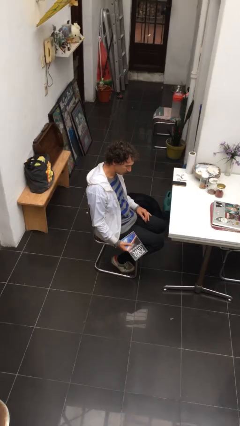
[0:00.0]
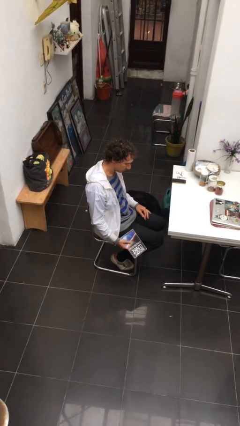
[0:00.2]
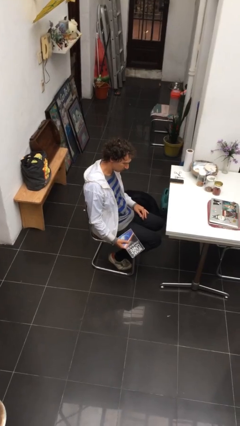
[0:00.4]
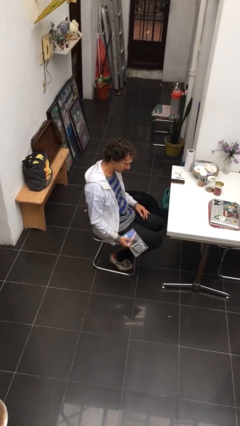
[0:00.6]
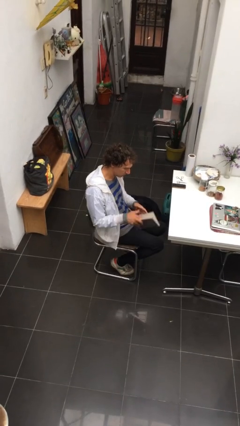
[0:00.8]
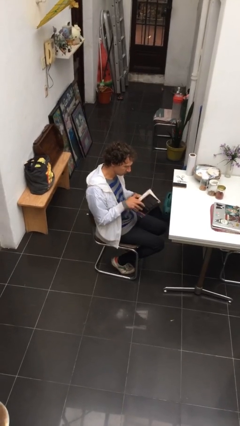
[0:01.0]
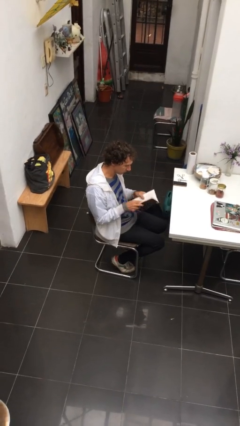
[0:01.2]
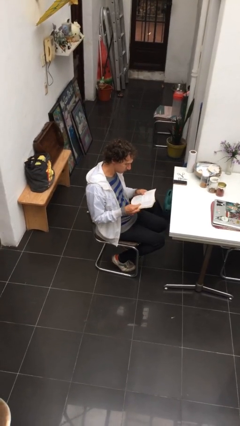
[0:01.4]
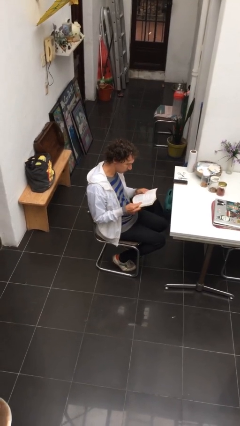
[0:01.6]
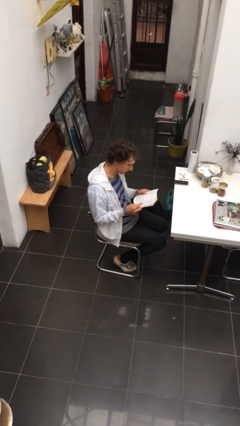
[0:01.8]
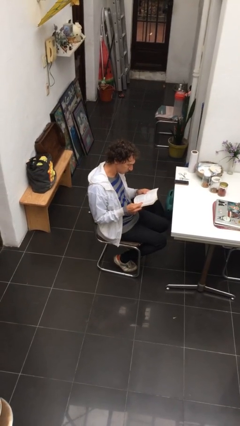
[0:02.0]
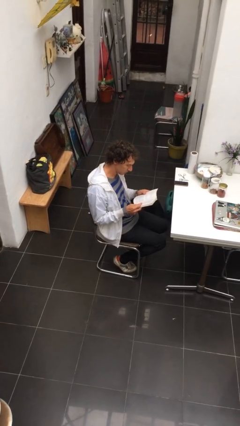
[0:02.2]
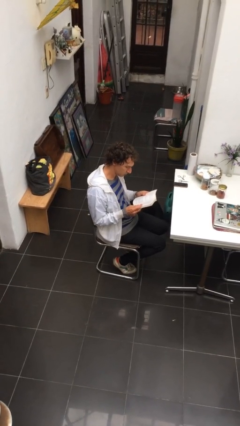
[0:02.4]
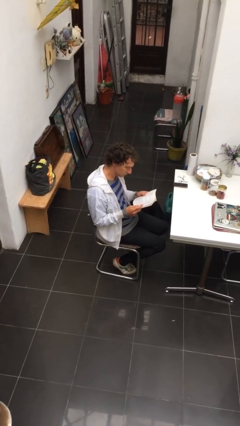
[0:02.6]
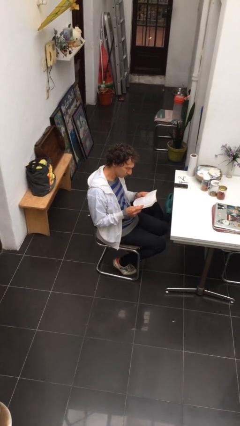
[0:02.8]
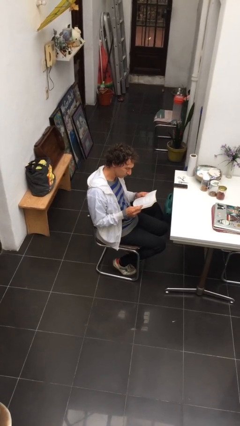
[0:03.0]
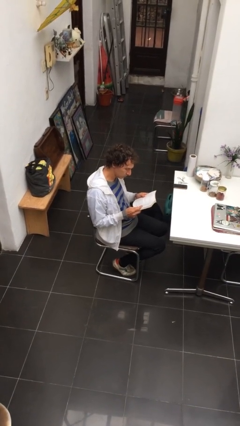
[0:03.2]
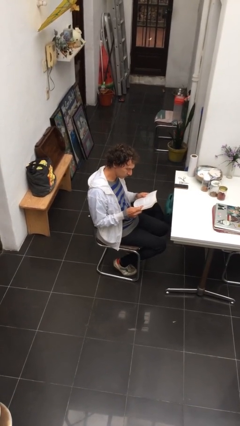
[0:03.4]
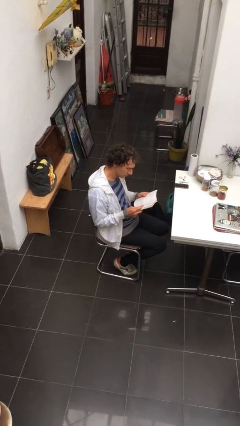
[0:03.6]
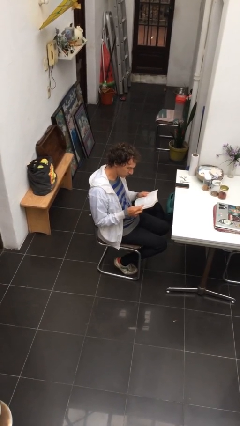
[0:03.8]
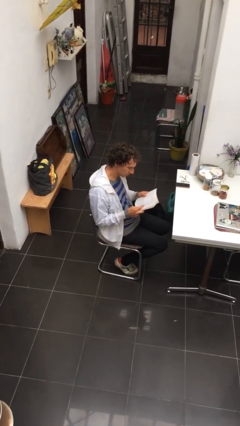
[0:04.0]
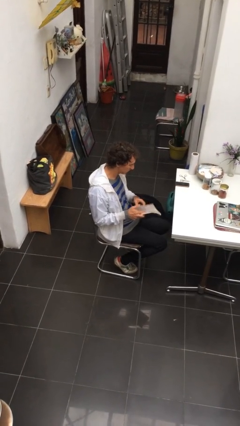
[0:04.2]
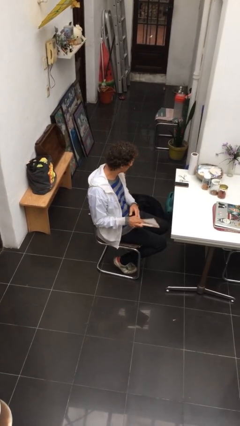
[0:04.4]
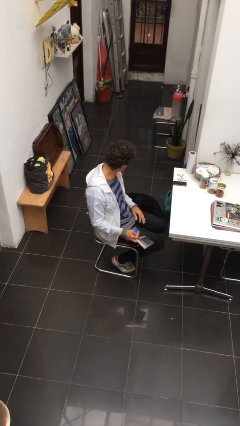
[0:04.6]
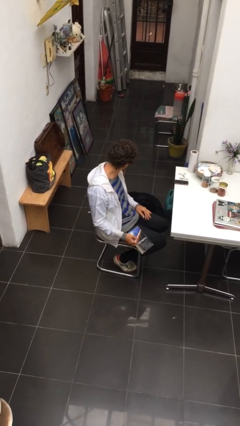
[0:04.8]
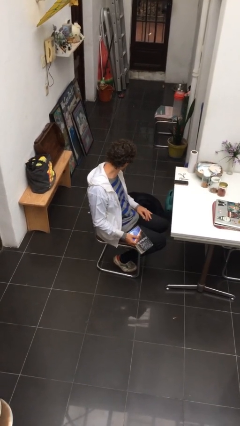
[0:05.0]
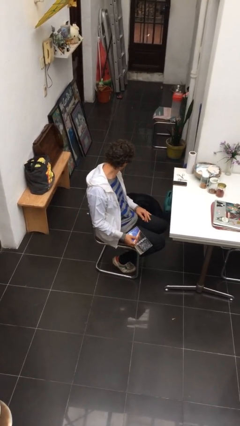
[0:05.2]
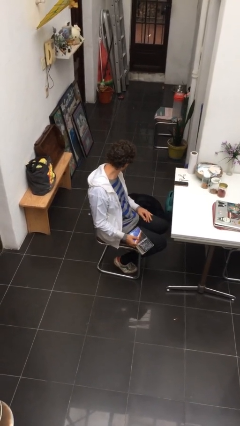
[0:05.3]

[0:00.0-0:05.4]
person reads document

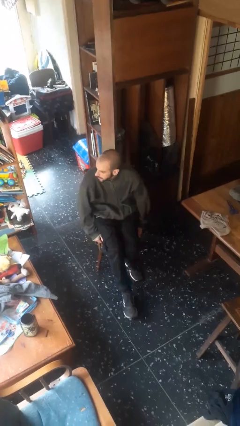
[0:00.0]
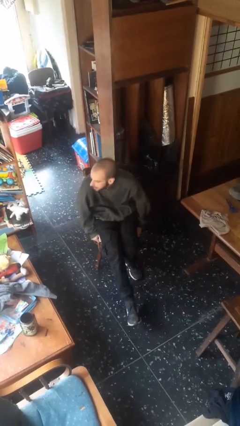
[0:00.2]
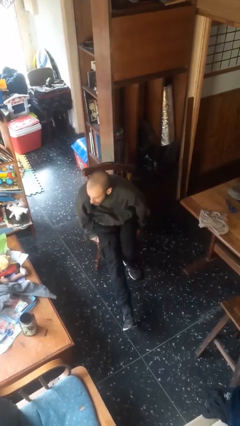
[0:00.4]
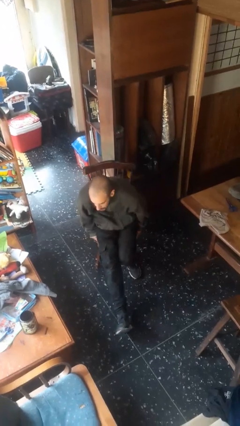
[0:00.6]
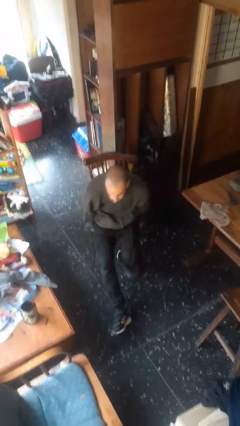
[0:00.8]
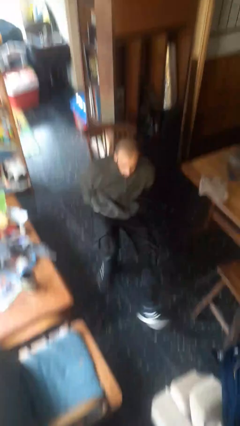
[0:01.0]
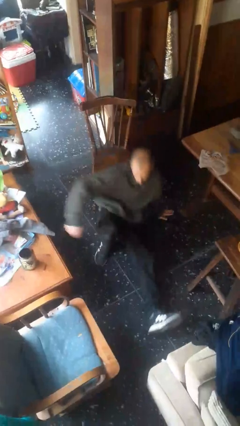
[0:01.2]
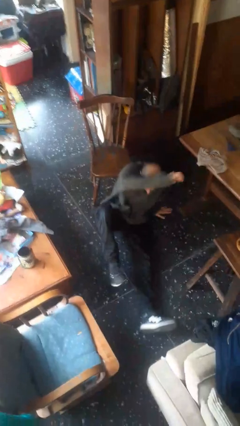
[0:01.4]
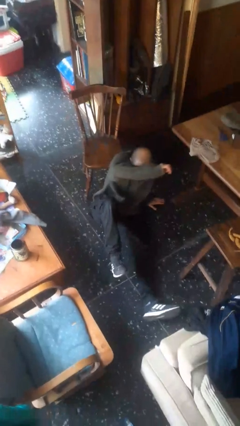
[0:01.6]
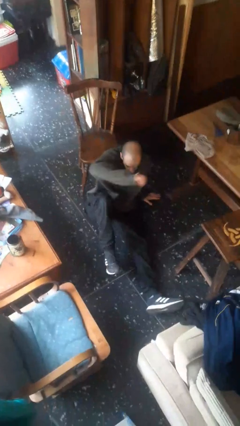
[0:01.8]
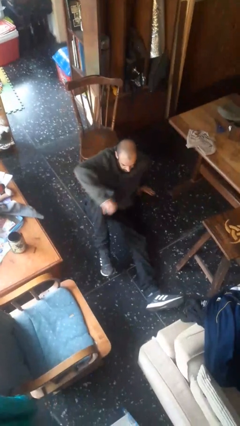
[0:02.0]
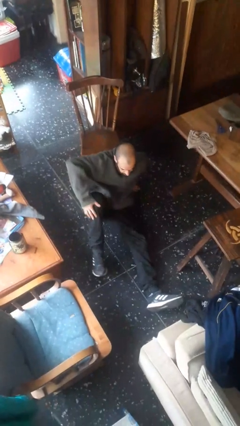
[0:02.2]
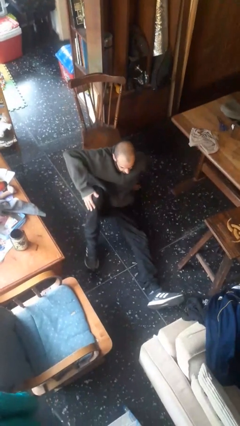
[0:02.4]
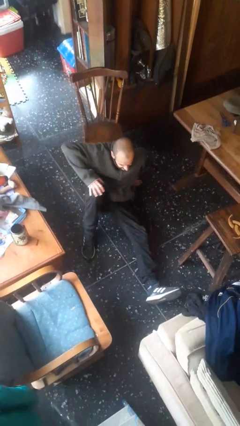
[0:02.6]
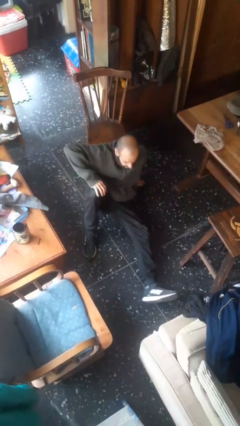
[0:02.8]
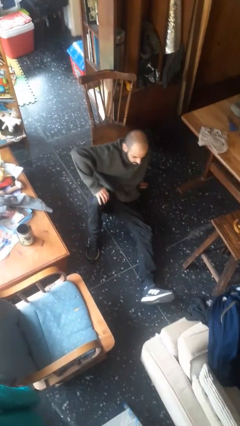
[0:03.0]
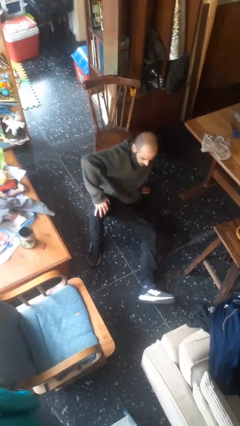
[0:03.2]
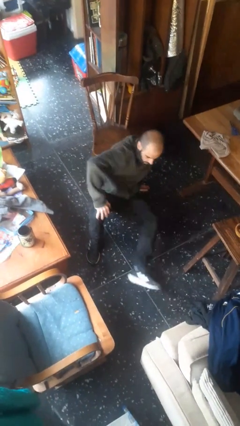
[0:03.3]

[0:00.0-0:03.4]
person falls from chair

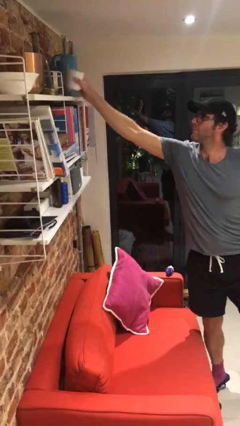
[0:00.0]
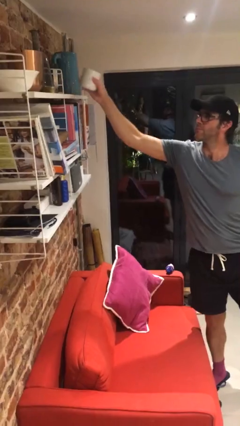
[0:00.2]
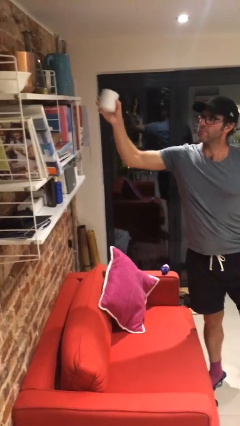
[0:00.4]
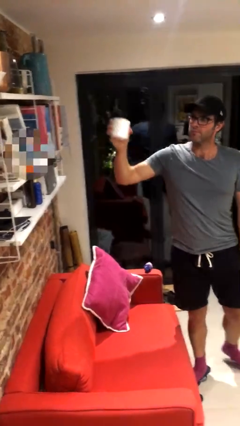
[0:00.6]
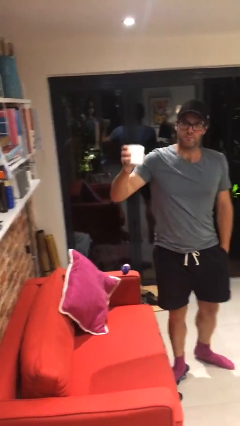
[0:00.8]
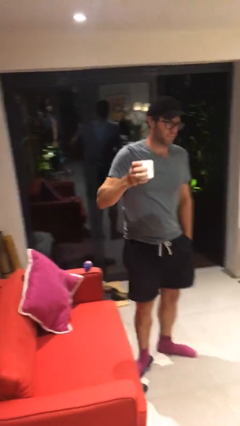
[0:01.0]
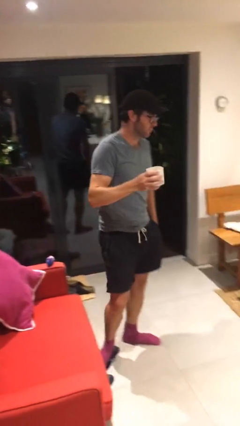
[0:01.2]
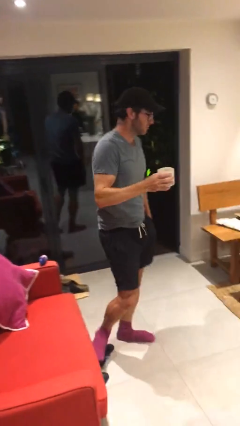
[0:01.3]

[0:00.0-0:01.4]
person picks up object from shelf

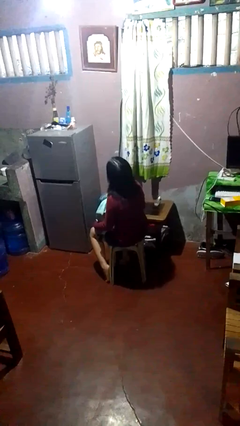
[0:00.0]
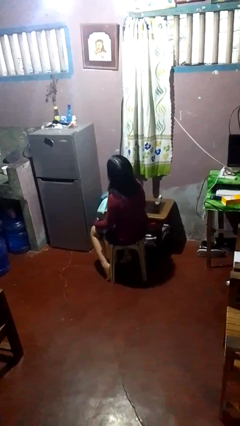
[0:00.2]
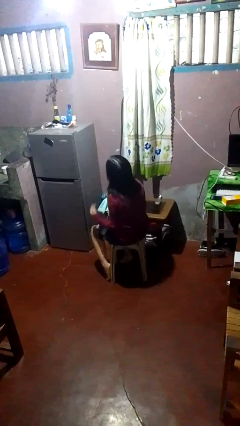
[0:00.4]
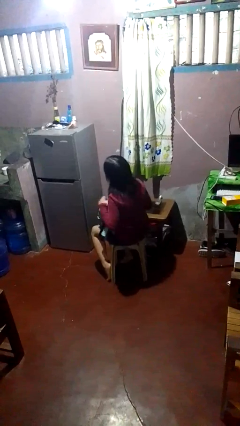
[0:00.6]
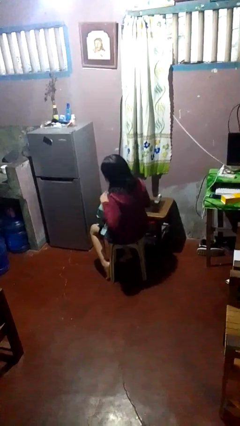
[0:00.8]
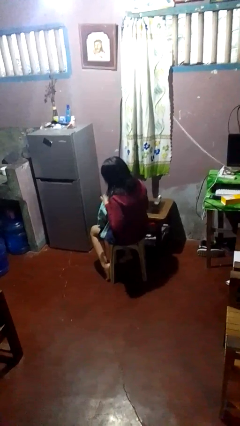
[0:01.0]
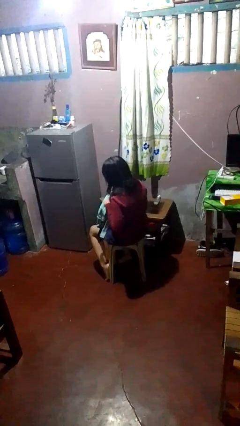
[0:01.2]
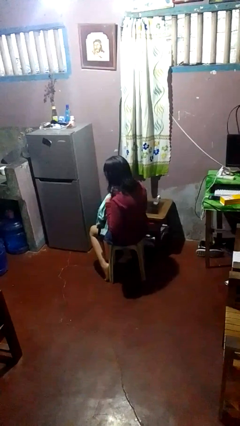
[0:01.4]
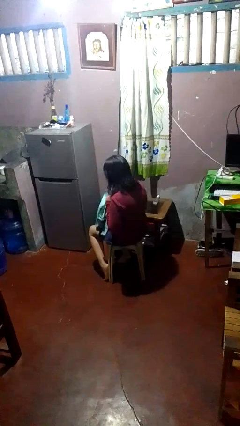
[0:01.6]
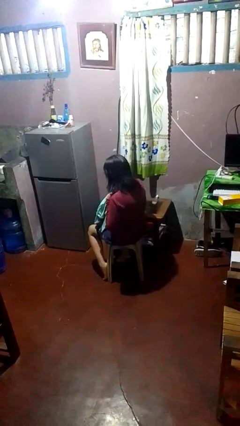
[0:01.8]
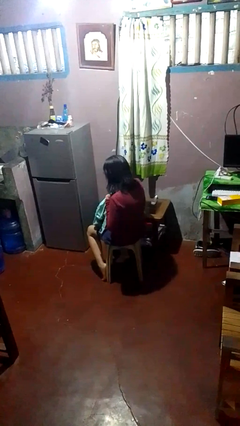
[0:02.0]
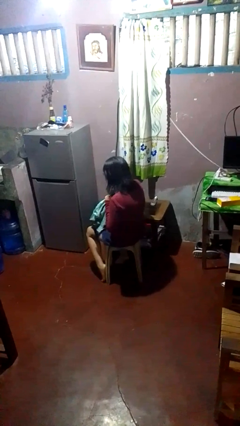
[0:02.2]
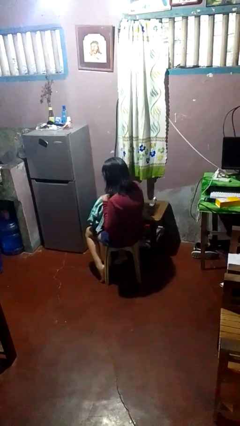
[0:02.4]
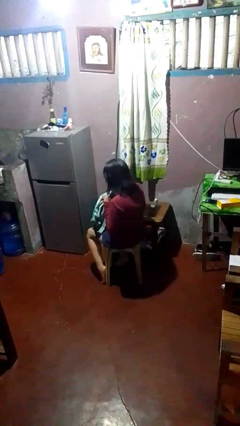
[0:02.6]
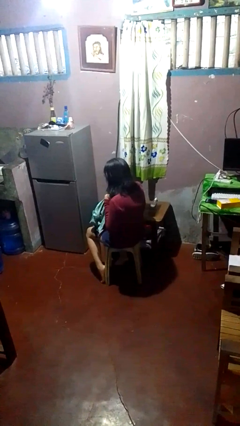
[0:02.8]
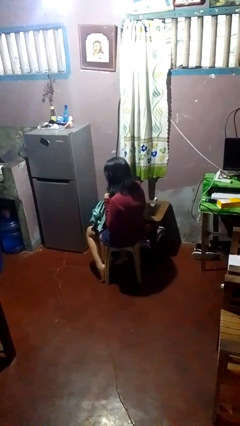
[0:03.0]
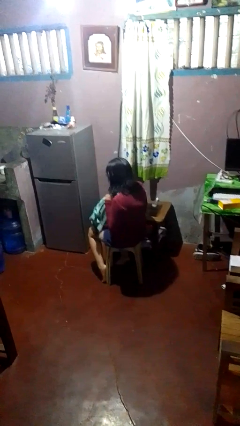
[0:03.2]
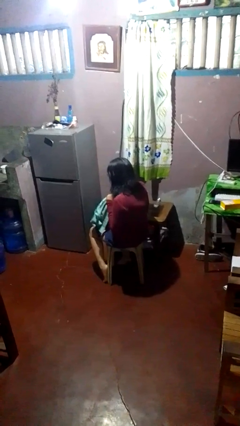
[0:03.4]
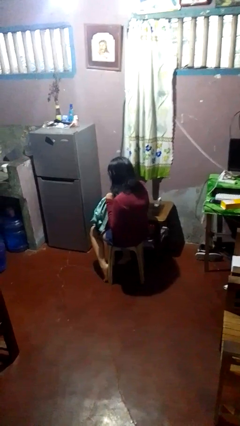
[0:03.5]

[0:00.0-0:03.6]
person searches in backpack

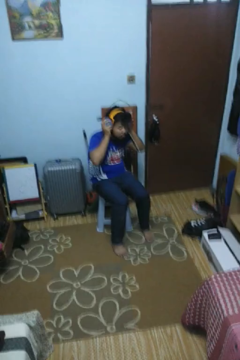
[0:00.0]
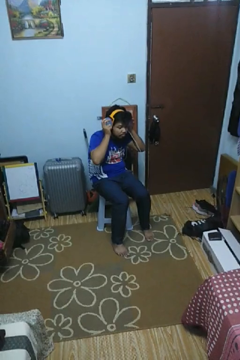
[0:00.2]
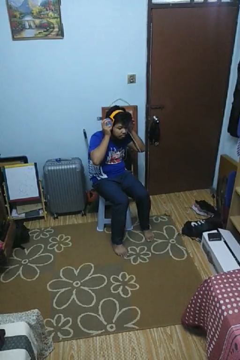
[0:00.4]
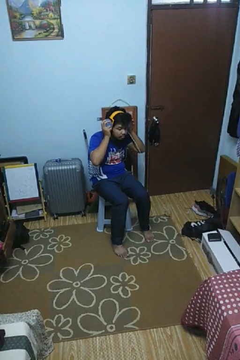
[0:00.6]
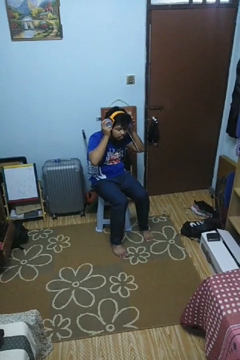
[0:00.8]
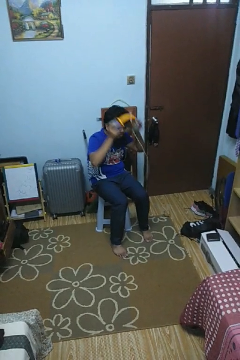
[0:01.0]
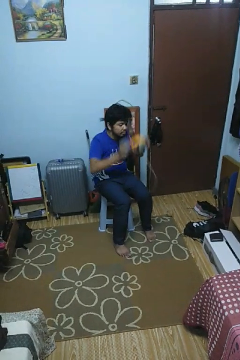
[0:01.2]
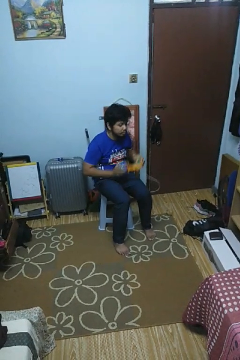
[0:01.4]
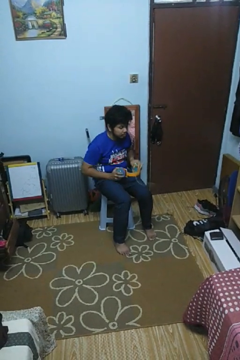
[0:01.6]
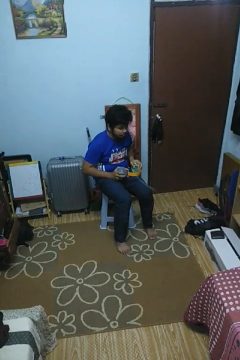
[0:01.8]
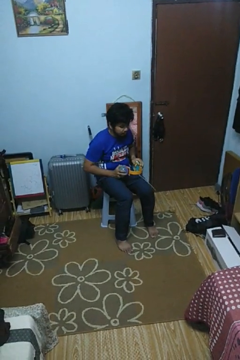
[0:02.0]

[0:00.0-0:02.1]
person takes off headphones

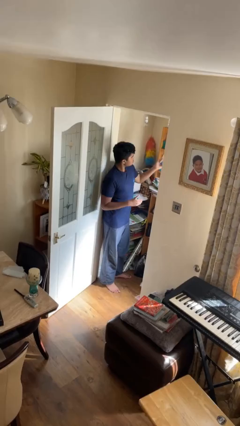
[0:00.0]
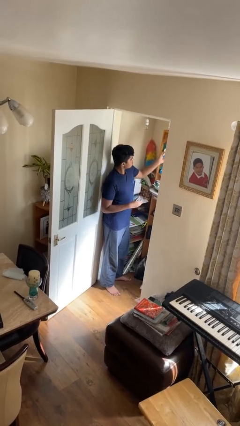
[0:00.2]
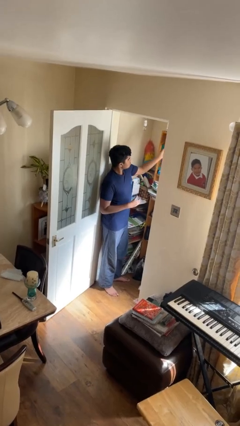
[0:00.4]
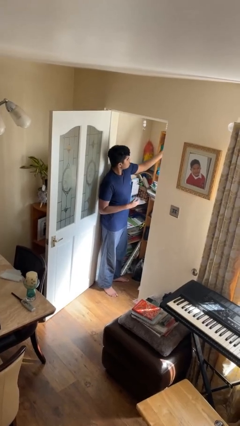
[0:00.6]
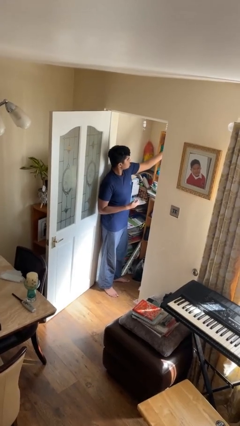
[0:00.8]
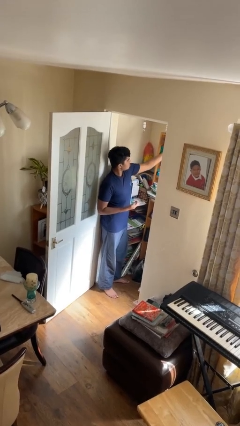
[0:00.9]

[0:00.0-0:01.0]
person puts down object on shelf

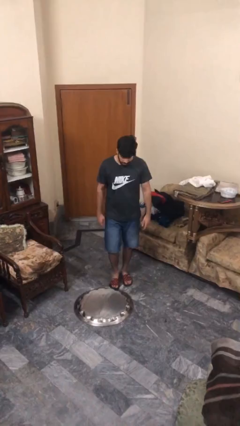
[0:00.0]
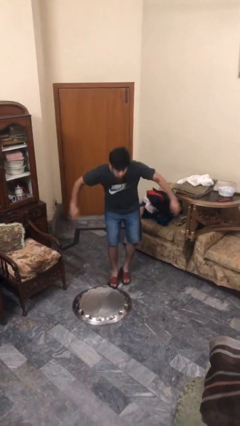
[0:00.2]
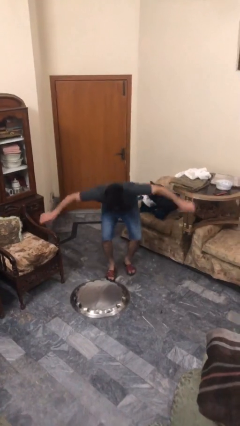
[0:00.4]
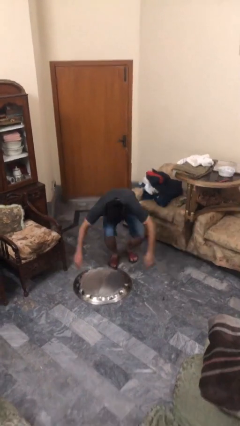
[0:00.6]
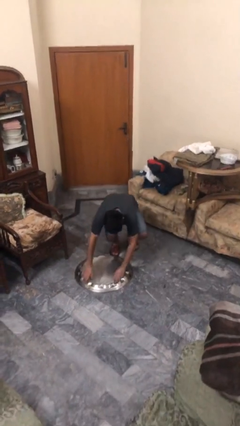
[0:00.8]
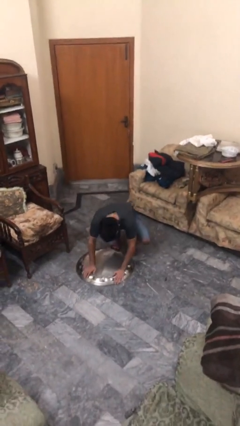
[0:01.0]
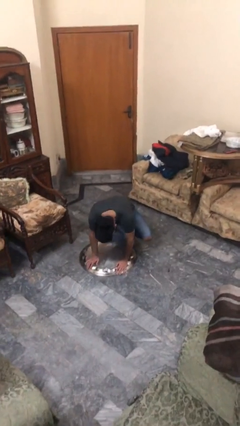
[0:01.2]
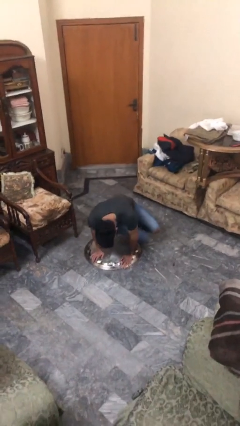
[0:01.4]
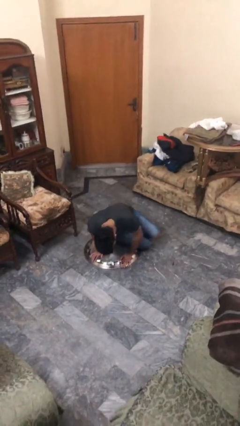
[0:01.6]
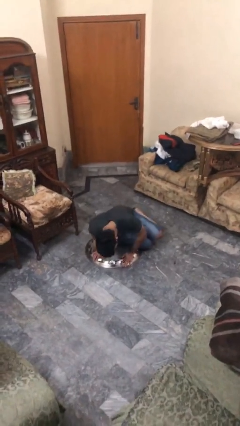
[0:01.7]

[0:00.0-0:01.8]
person trips on object on floor
